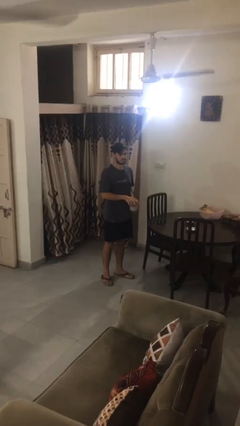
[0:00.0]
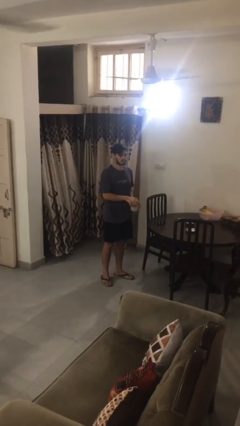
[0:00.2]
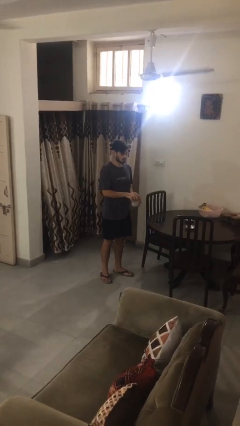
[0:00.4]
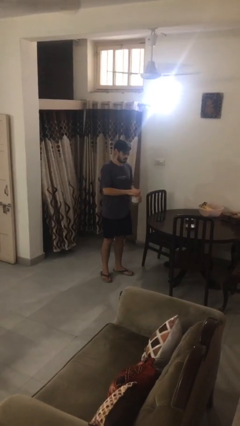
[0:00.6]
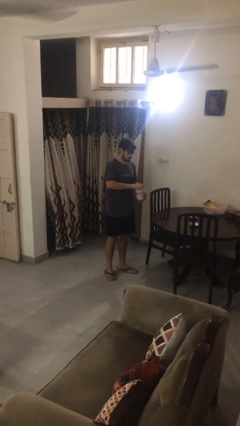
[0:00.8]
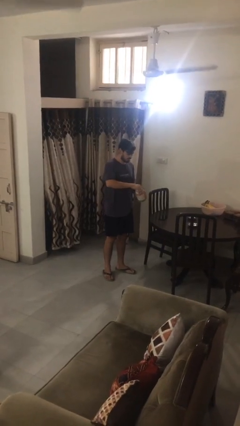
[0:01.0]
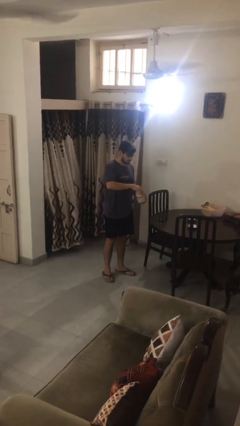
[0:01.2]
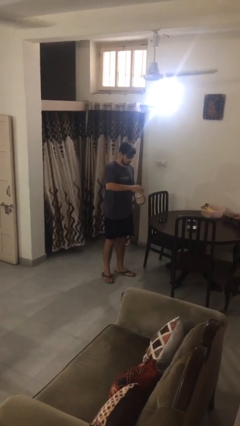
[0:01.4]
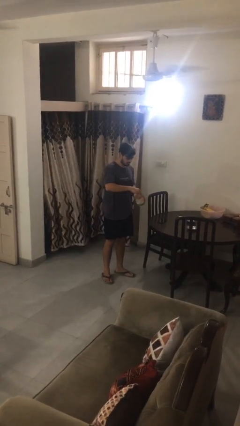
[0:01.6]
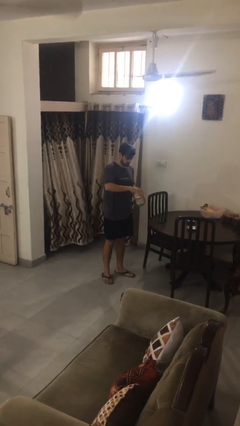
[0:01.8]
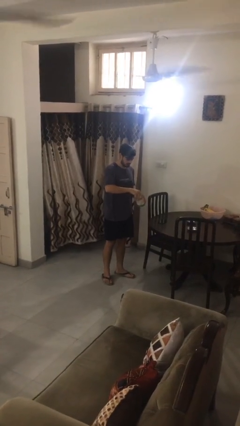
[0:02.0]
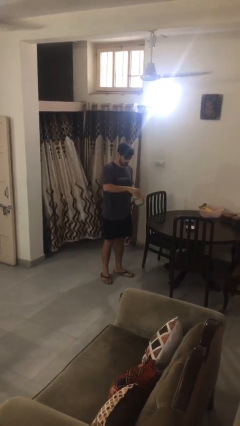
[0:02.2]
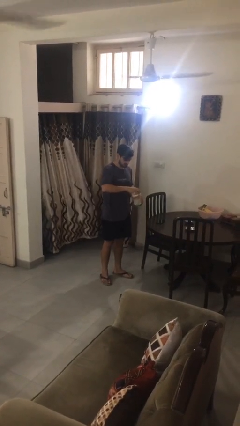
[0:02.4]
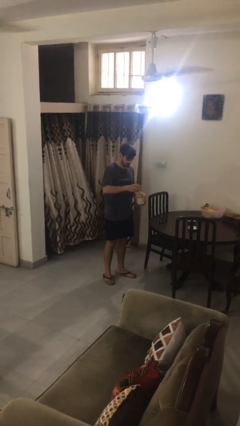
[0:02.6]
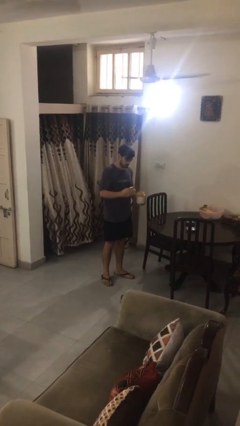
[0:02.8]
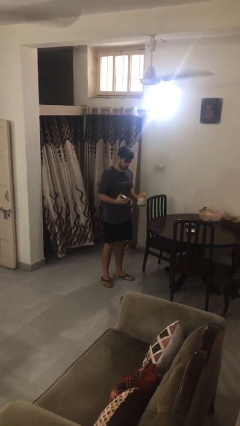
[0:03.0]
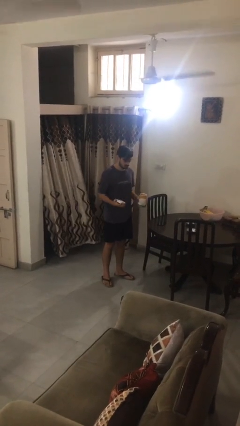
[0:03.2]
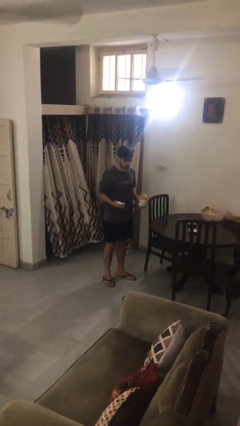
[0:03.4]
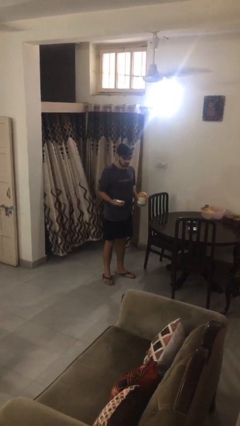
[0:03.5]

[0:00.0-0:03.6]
person opens jar

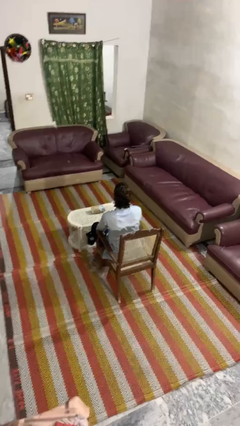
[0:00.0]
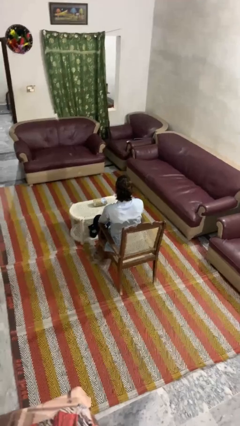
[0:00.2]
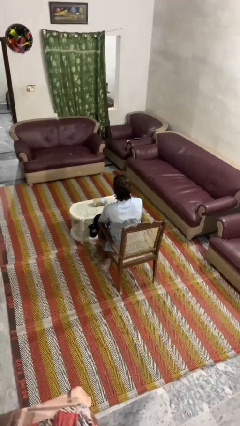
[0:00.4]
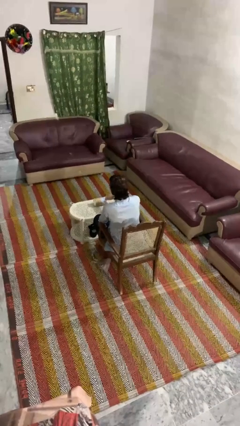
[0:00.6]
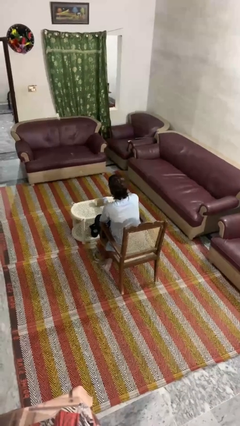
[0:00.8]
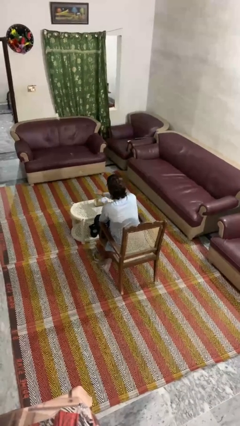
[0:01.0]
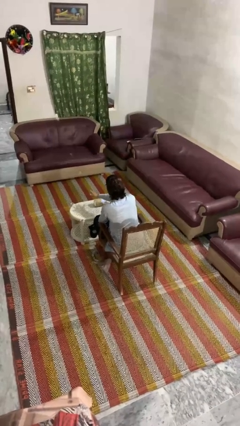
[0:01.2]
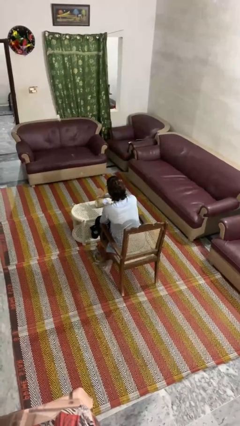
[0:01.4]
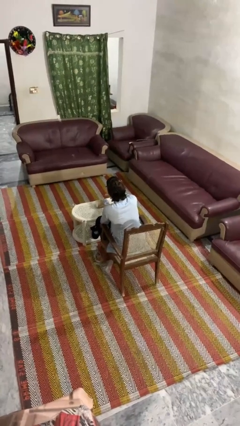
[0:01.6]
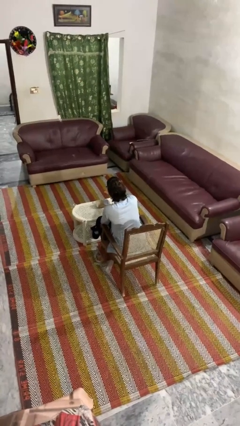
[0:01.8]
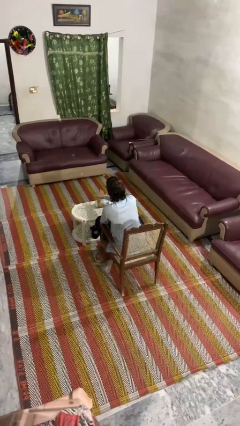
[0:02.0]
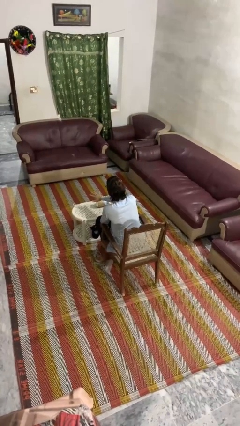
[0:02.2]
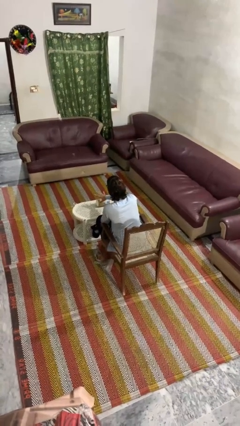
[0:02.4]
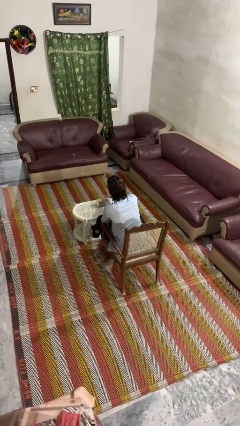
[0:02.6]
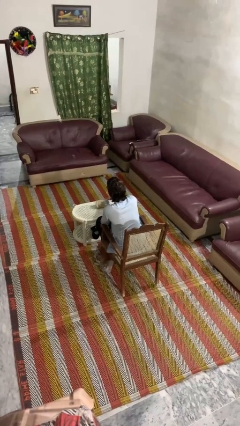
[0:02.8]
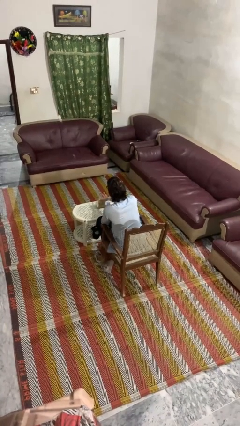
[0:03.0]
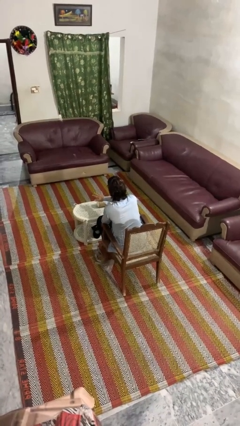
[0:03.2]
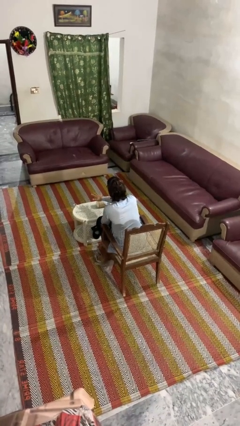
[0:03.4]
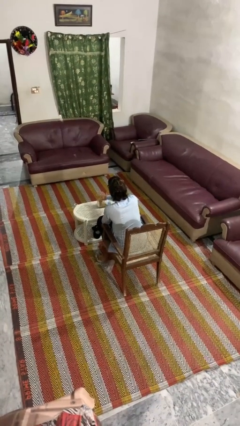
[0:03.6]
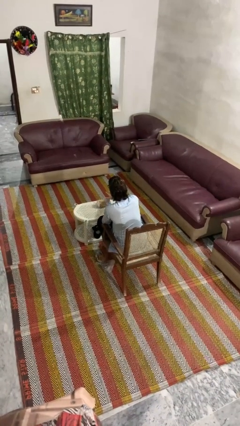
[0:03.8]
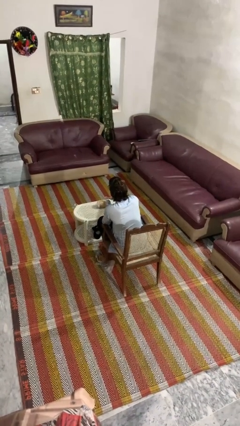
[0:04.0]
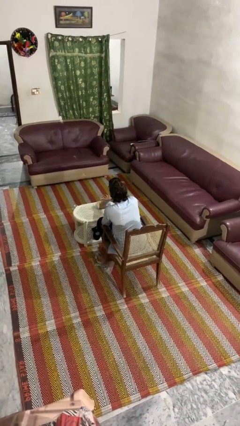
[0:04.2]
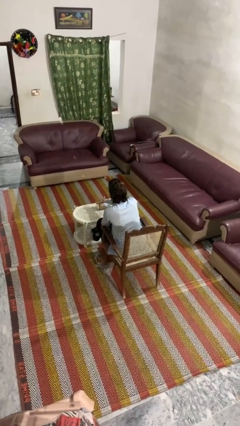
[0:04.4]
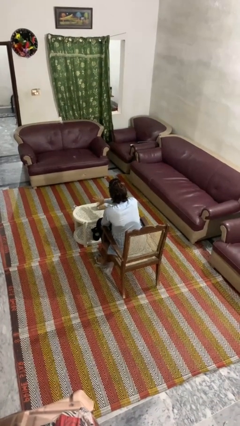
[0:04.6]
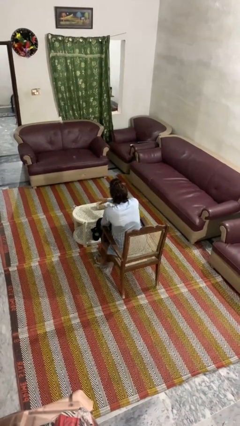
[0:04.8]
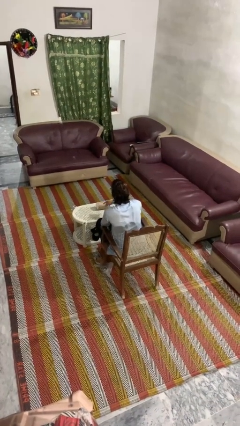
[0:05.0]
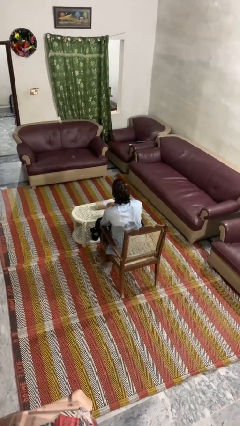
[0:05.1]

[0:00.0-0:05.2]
person waves hand over object

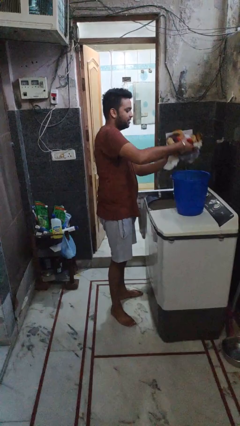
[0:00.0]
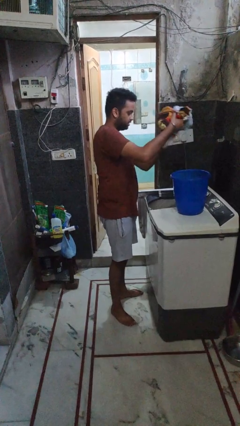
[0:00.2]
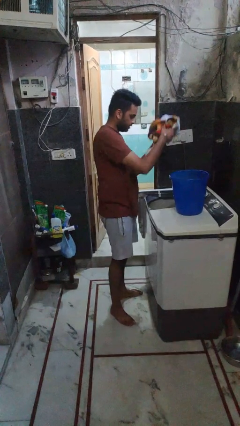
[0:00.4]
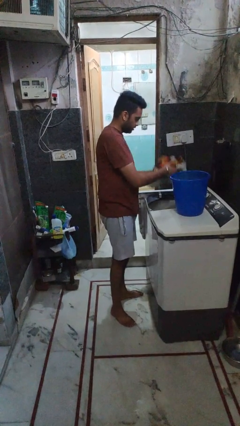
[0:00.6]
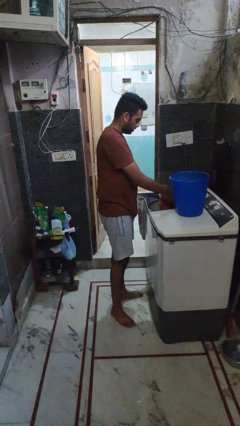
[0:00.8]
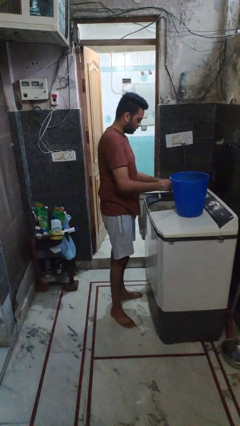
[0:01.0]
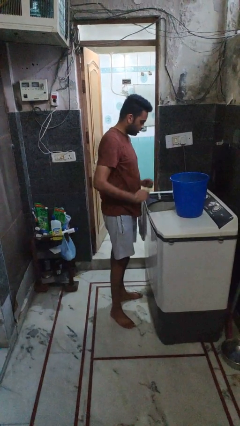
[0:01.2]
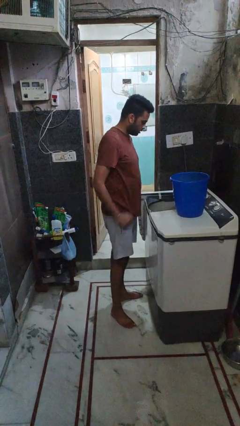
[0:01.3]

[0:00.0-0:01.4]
person loads clotheswasher

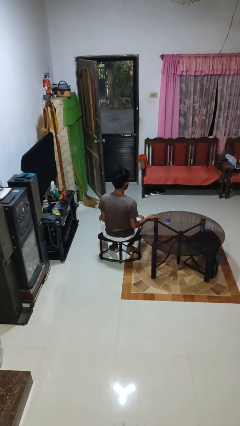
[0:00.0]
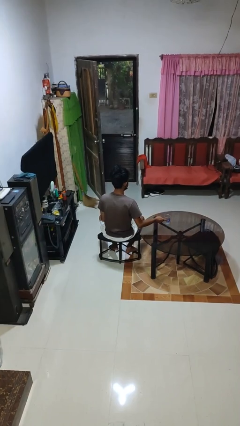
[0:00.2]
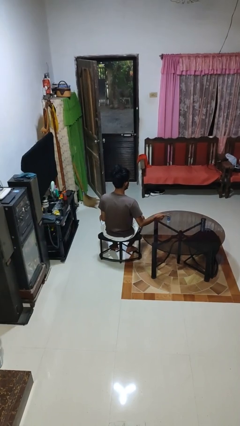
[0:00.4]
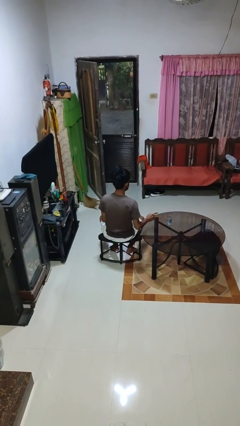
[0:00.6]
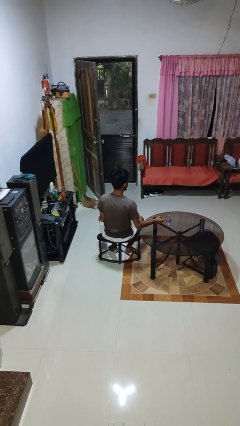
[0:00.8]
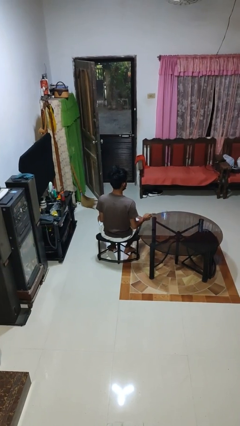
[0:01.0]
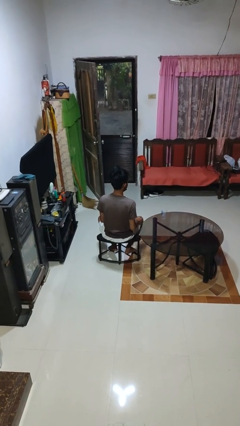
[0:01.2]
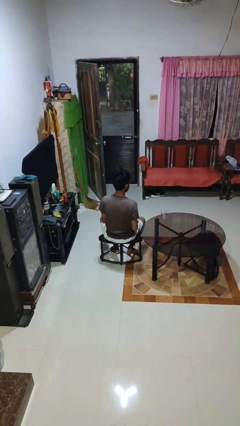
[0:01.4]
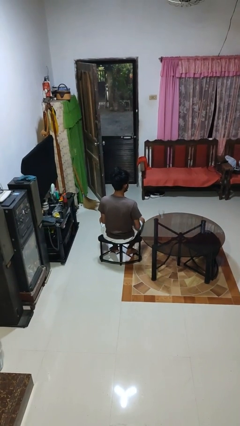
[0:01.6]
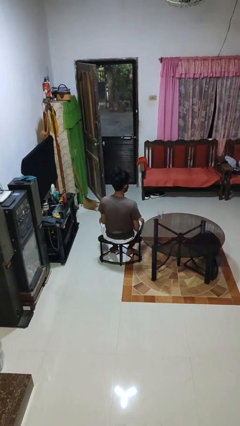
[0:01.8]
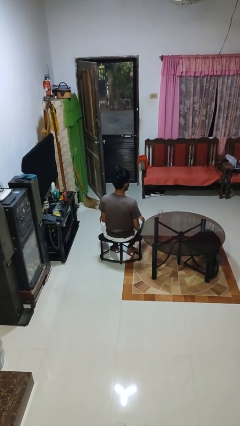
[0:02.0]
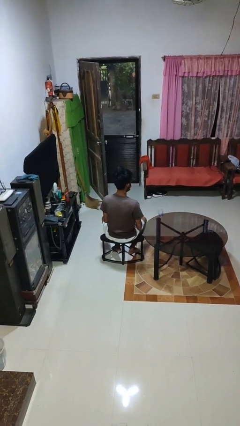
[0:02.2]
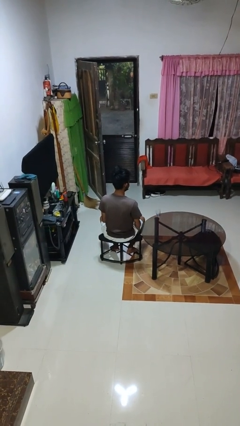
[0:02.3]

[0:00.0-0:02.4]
person knocks over glass

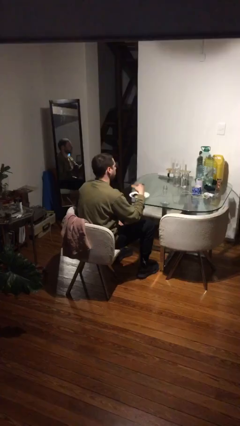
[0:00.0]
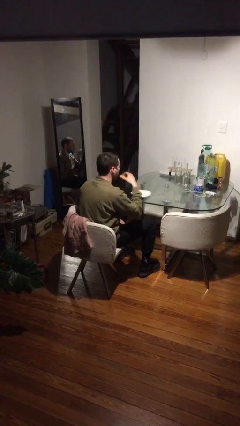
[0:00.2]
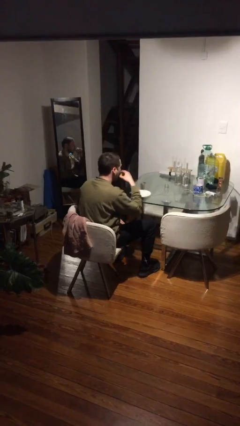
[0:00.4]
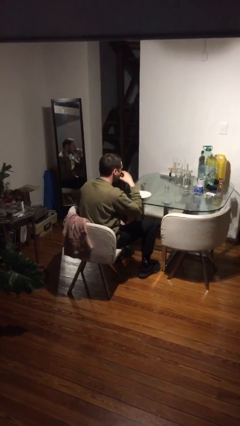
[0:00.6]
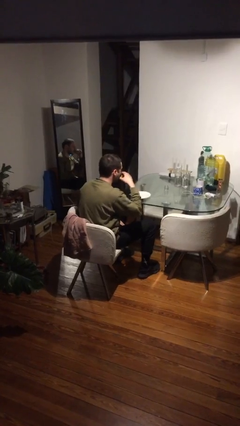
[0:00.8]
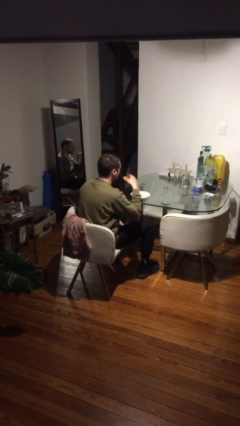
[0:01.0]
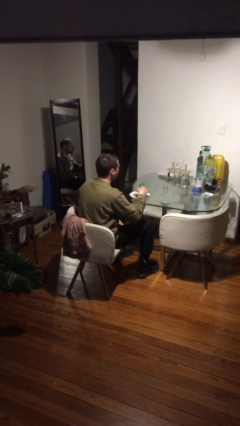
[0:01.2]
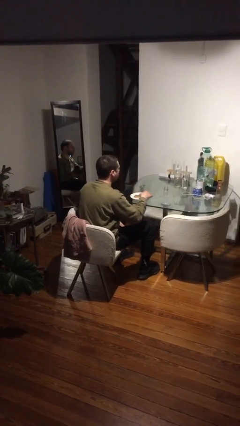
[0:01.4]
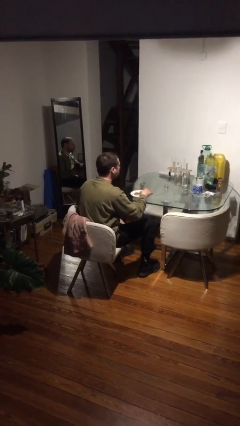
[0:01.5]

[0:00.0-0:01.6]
person eats with hands

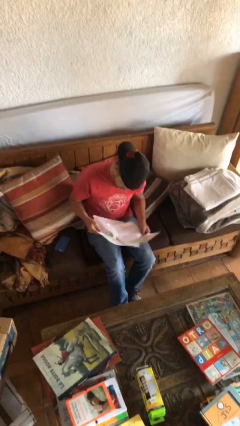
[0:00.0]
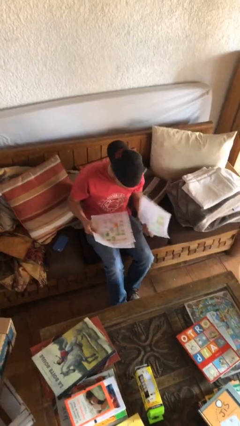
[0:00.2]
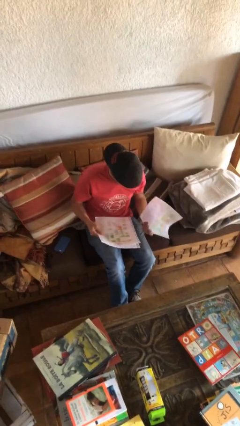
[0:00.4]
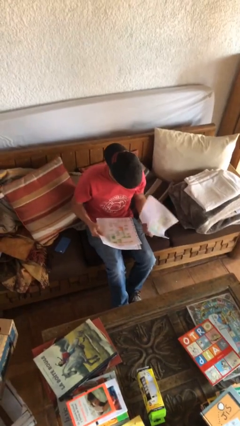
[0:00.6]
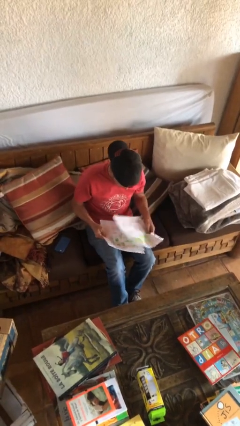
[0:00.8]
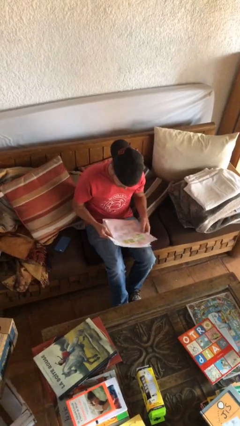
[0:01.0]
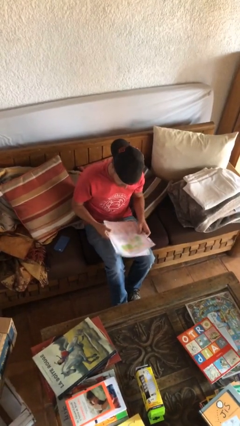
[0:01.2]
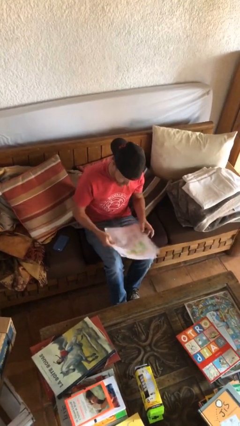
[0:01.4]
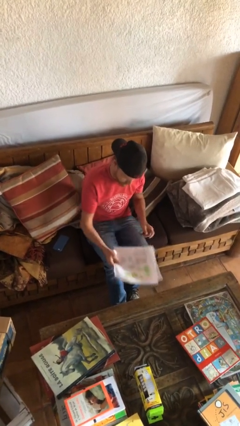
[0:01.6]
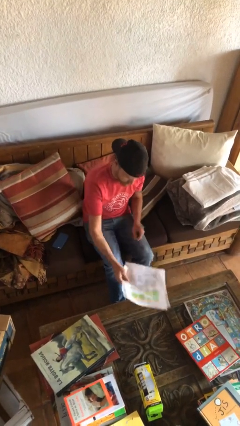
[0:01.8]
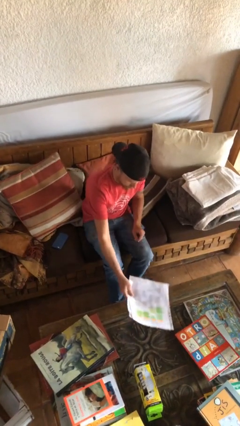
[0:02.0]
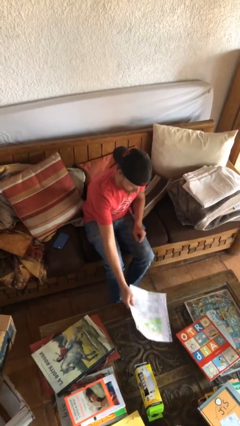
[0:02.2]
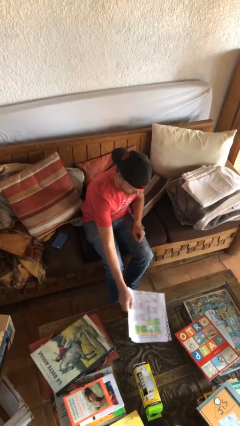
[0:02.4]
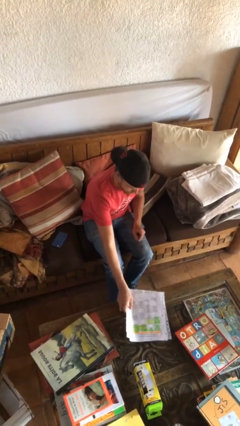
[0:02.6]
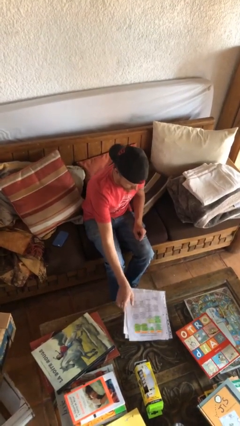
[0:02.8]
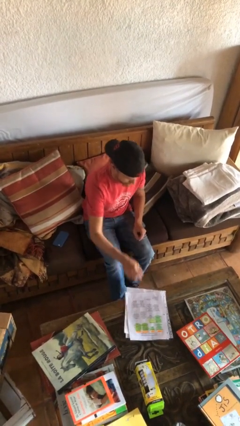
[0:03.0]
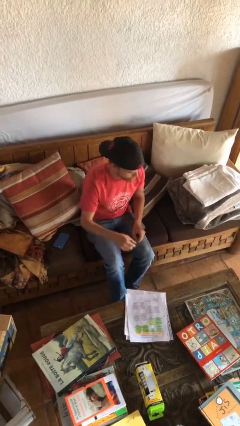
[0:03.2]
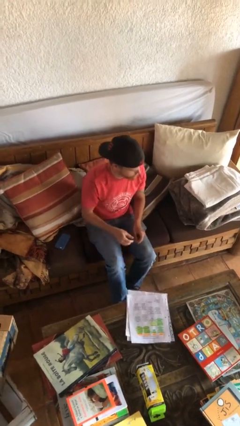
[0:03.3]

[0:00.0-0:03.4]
person puts down object on table

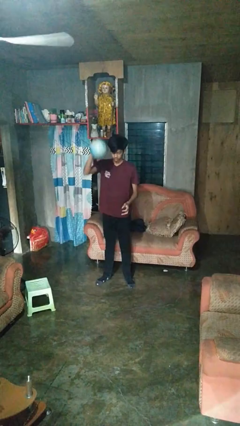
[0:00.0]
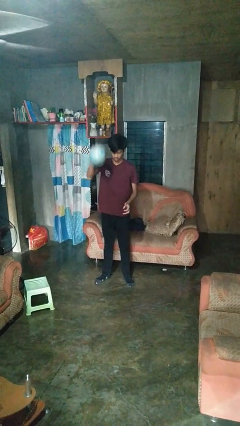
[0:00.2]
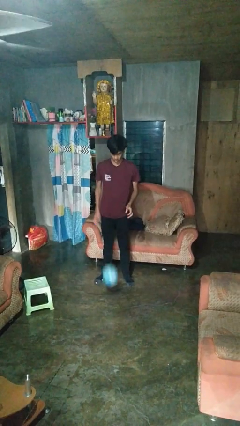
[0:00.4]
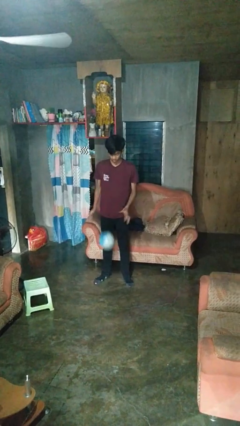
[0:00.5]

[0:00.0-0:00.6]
person bounces ball on floor
